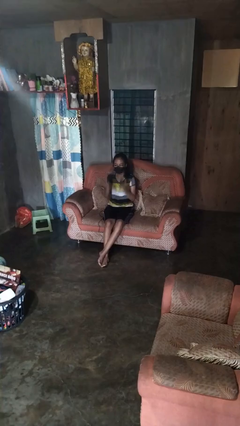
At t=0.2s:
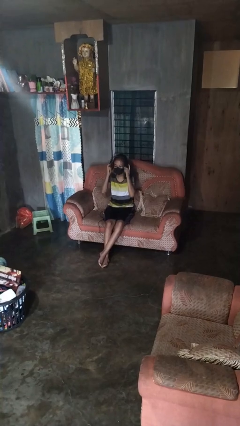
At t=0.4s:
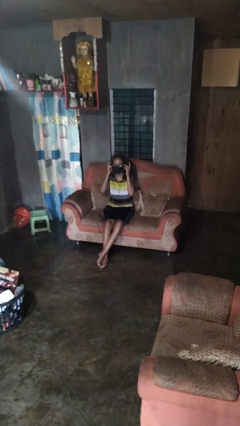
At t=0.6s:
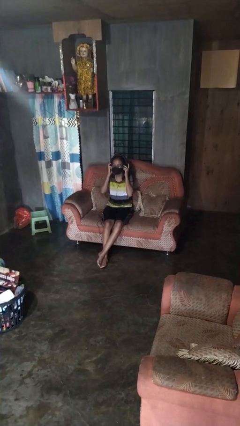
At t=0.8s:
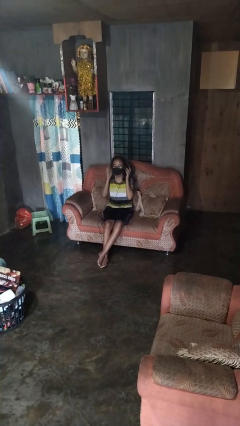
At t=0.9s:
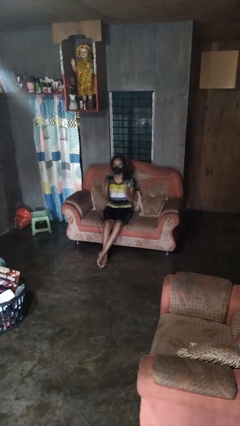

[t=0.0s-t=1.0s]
person puts on headphones

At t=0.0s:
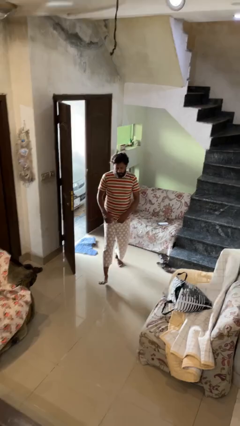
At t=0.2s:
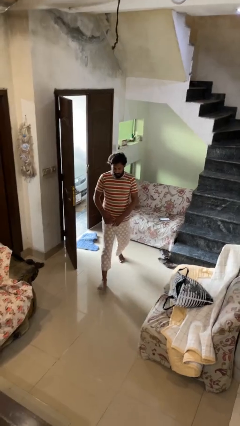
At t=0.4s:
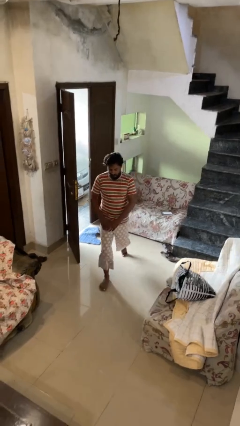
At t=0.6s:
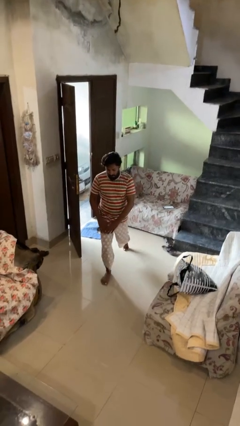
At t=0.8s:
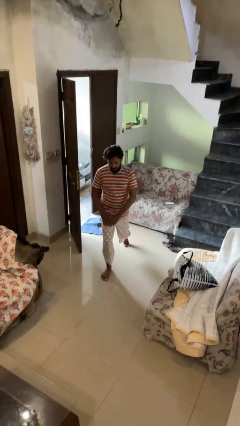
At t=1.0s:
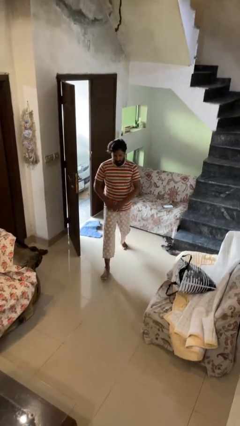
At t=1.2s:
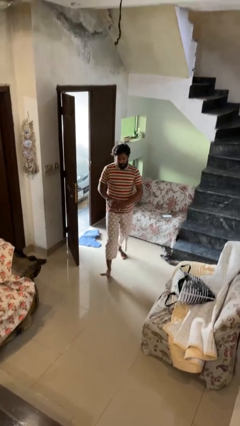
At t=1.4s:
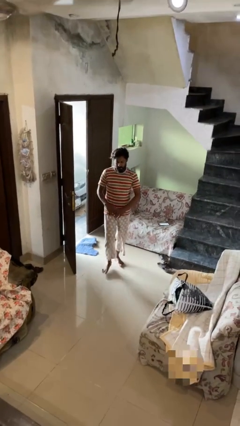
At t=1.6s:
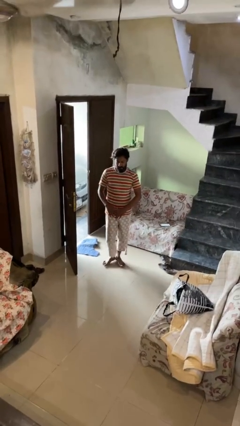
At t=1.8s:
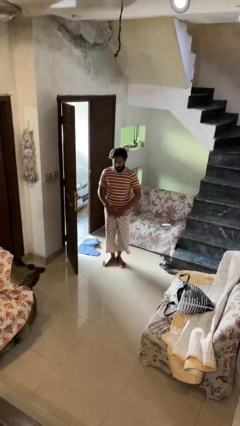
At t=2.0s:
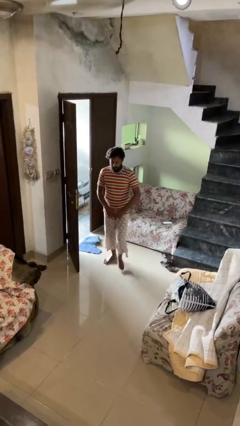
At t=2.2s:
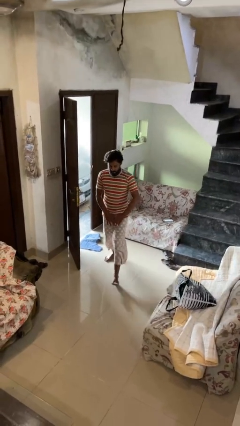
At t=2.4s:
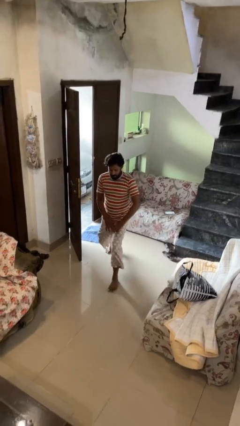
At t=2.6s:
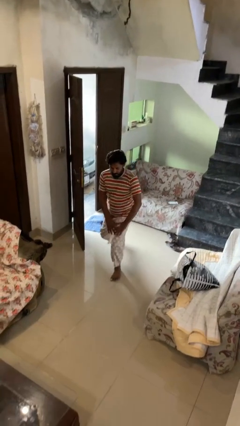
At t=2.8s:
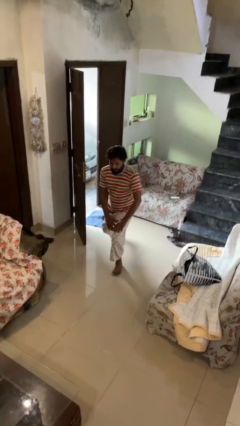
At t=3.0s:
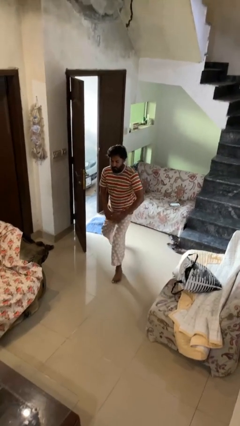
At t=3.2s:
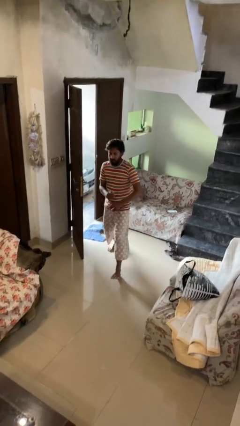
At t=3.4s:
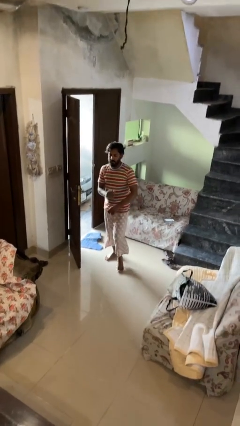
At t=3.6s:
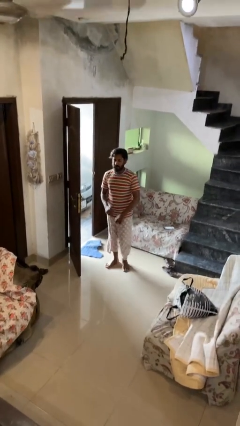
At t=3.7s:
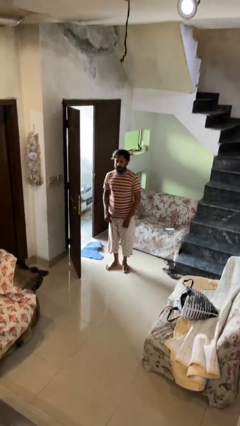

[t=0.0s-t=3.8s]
person exercises with lunges

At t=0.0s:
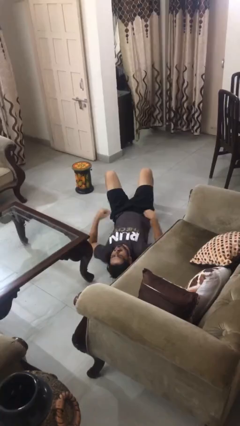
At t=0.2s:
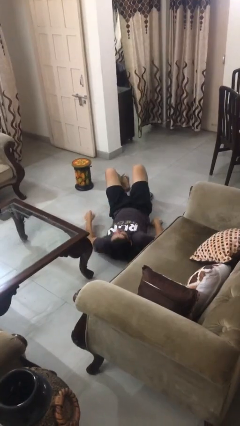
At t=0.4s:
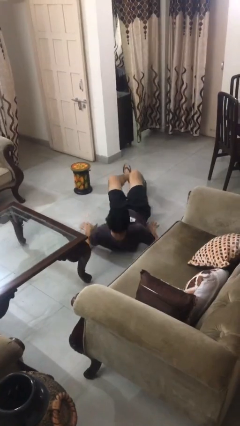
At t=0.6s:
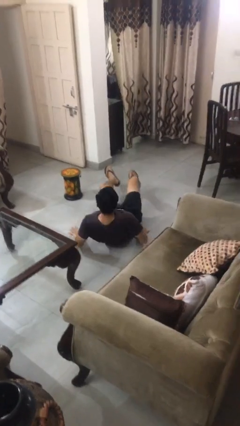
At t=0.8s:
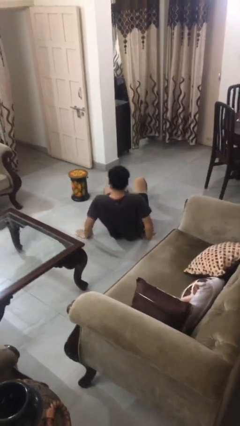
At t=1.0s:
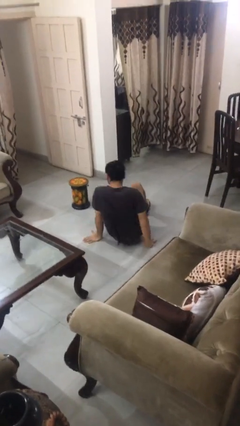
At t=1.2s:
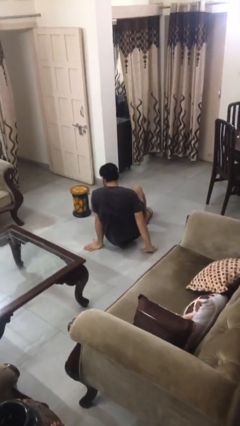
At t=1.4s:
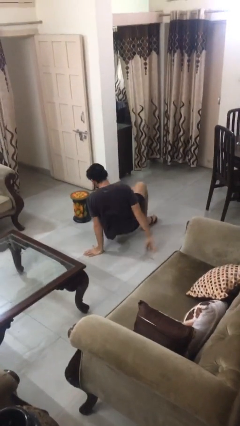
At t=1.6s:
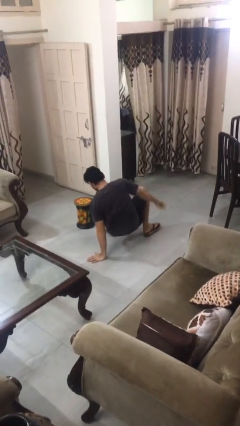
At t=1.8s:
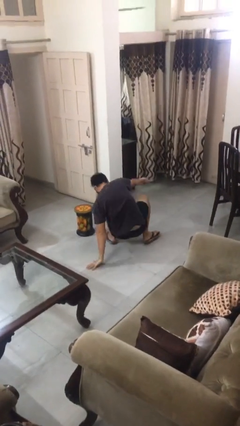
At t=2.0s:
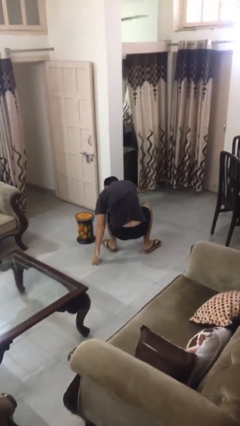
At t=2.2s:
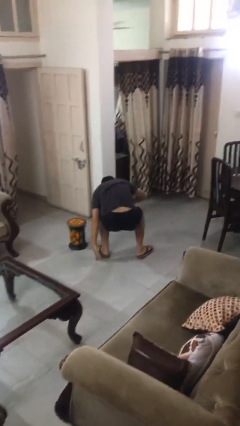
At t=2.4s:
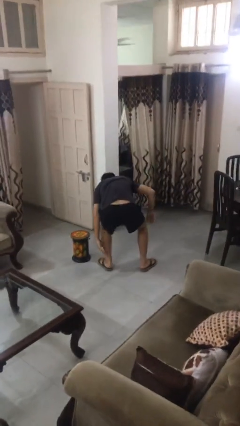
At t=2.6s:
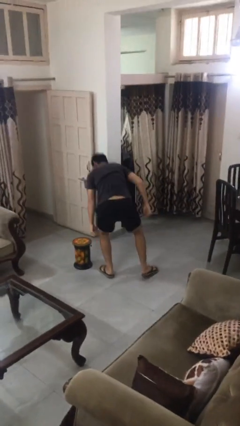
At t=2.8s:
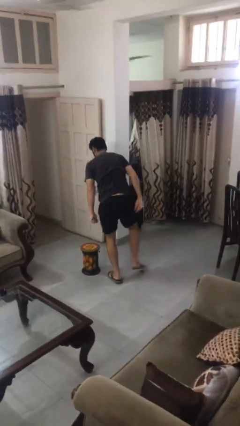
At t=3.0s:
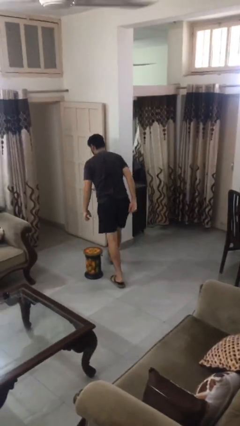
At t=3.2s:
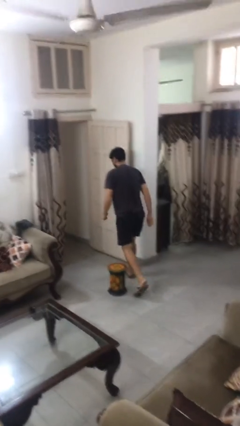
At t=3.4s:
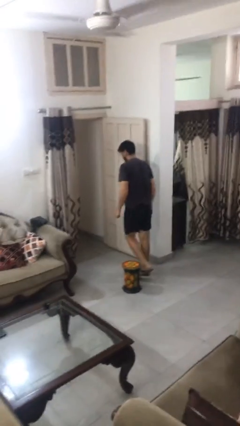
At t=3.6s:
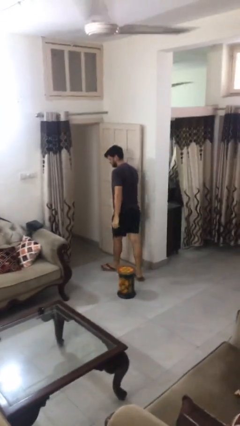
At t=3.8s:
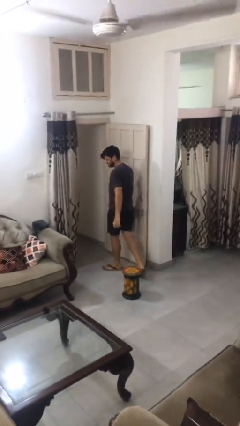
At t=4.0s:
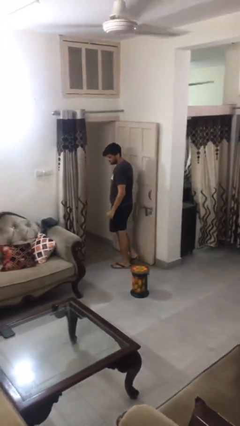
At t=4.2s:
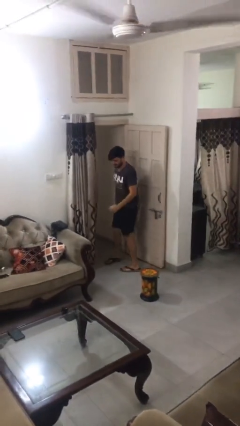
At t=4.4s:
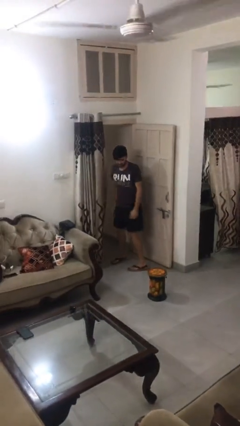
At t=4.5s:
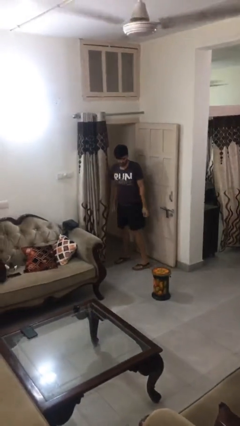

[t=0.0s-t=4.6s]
person stands up from floor

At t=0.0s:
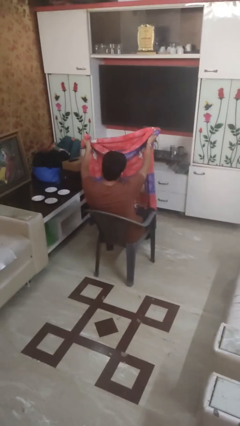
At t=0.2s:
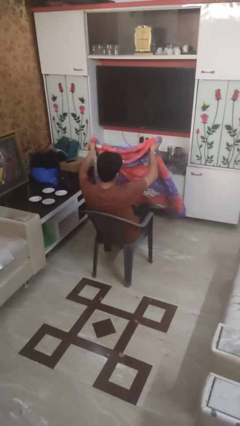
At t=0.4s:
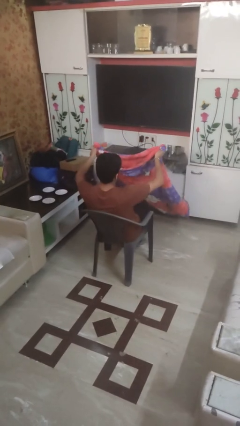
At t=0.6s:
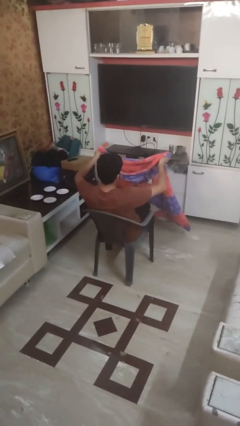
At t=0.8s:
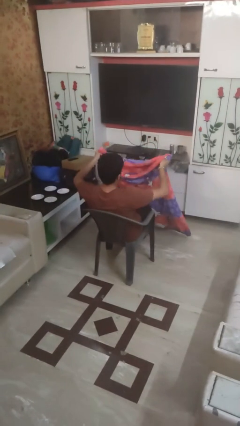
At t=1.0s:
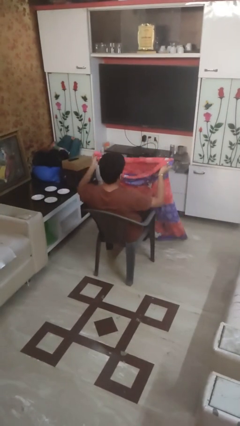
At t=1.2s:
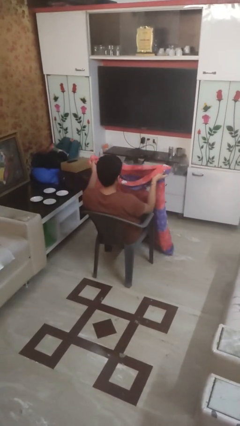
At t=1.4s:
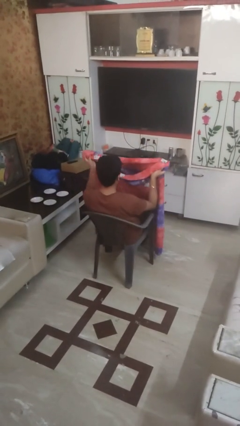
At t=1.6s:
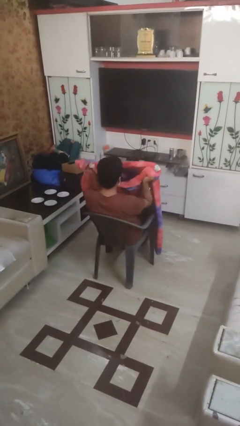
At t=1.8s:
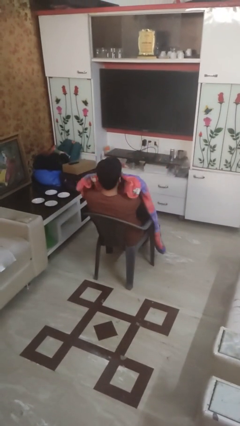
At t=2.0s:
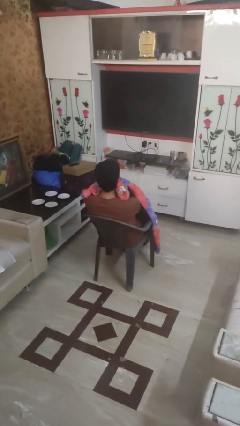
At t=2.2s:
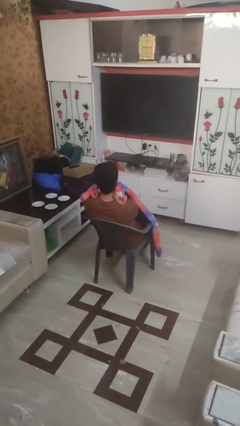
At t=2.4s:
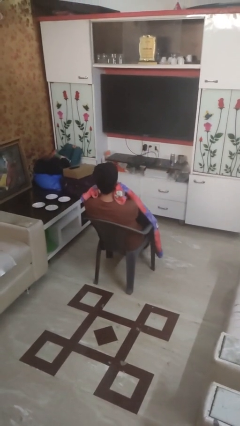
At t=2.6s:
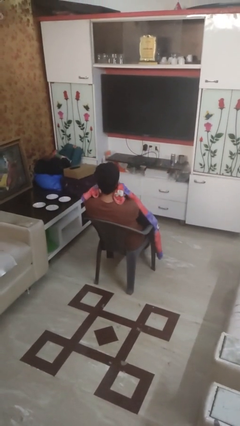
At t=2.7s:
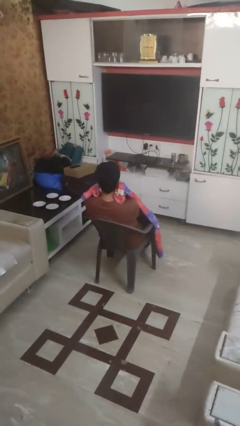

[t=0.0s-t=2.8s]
person covers with blanket

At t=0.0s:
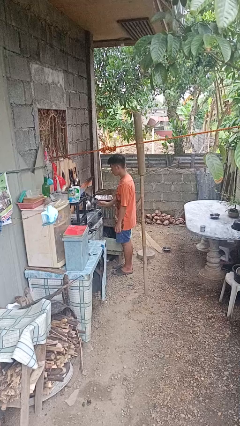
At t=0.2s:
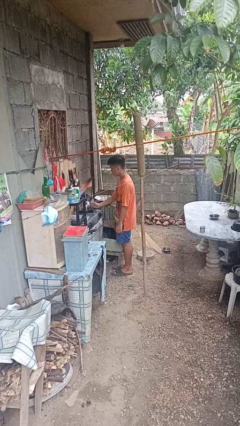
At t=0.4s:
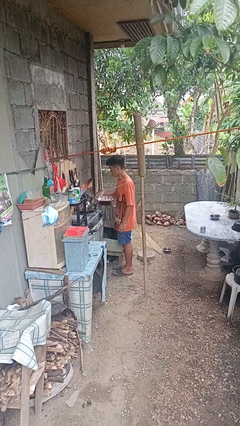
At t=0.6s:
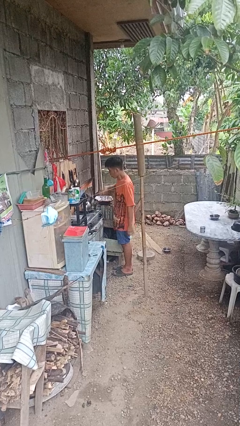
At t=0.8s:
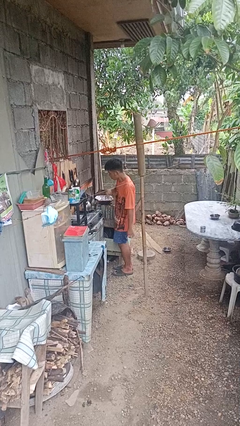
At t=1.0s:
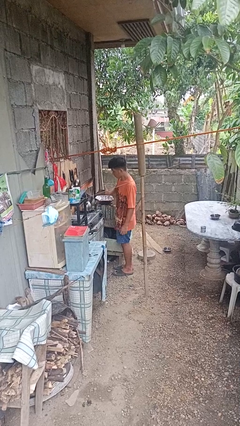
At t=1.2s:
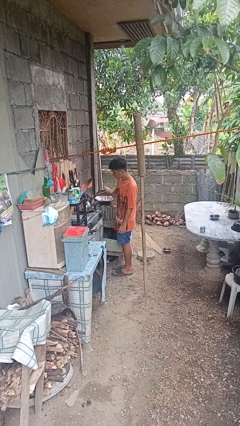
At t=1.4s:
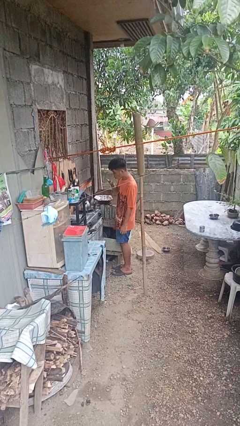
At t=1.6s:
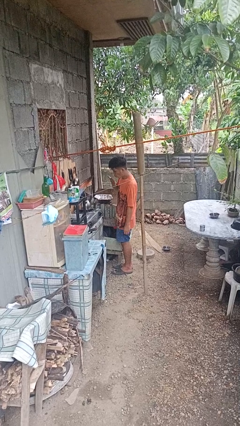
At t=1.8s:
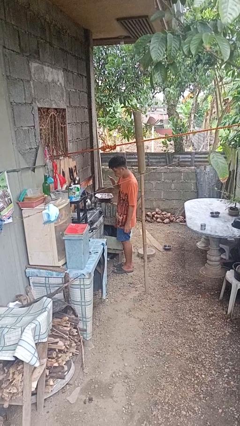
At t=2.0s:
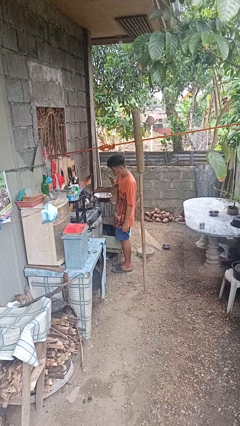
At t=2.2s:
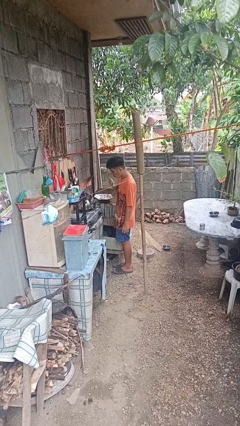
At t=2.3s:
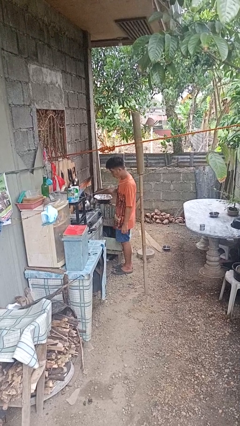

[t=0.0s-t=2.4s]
person burns hand

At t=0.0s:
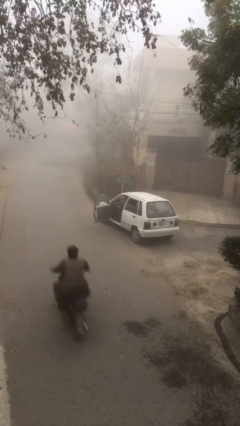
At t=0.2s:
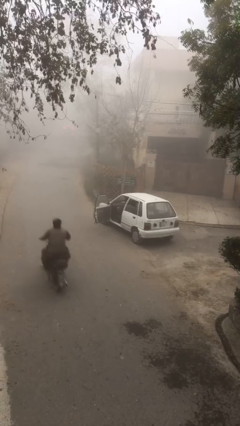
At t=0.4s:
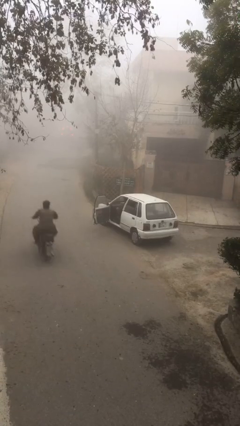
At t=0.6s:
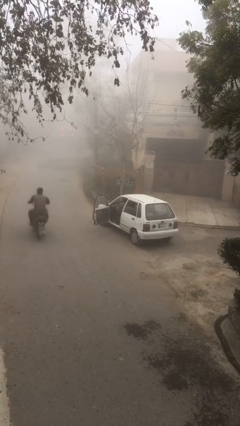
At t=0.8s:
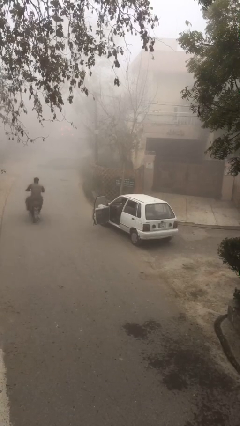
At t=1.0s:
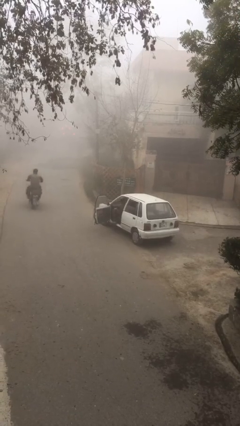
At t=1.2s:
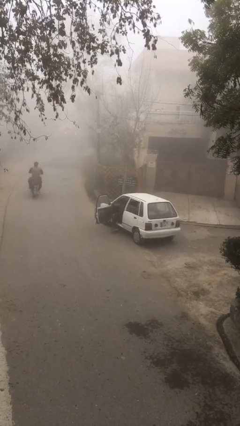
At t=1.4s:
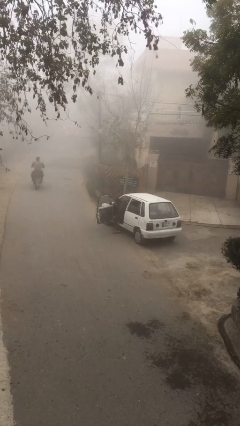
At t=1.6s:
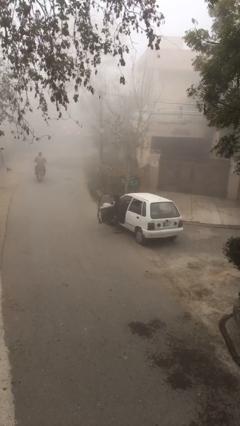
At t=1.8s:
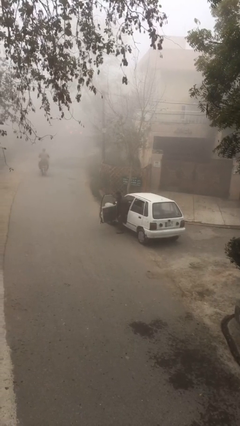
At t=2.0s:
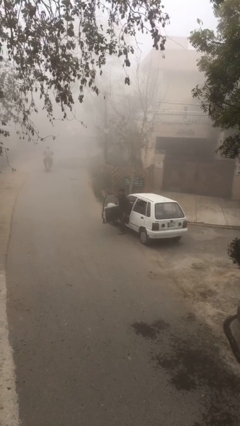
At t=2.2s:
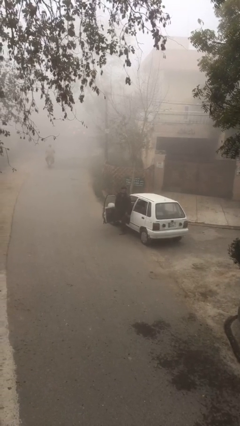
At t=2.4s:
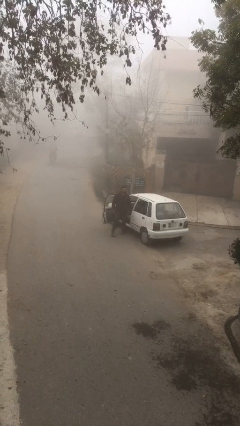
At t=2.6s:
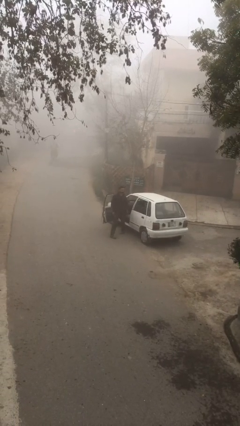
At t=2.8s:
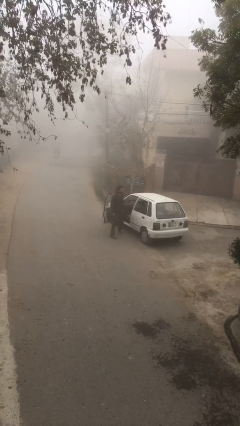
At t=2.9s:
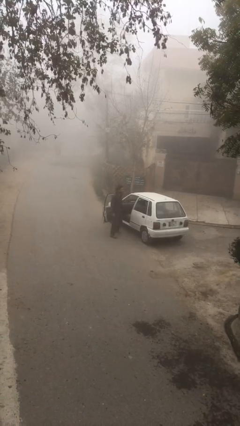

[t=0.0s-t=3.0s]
person exits car
